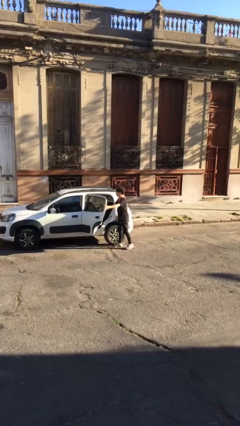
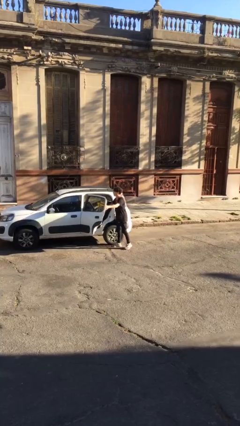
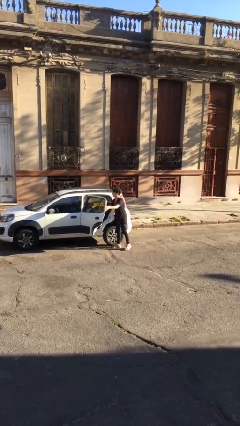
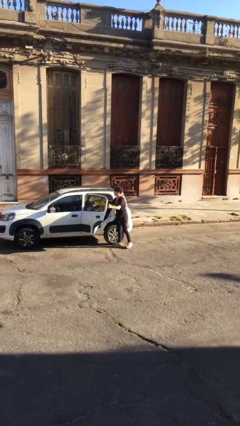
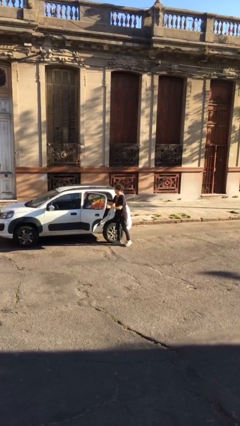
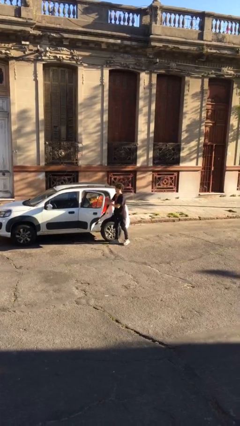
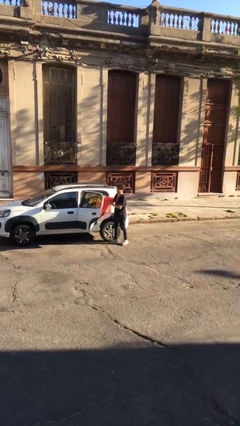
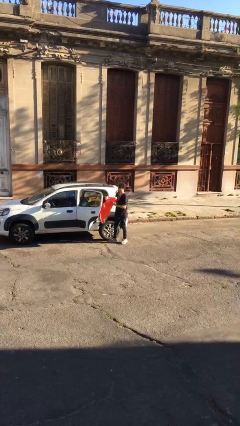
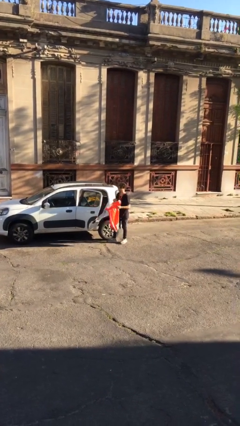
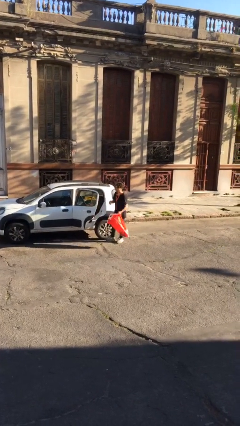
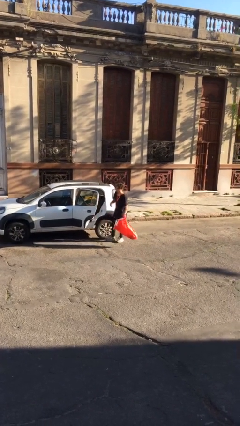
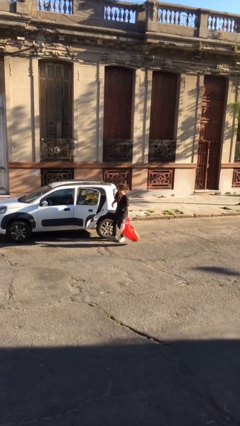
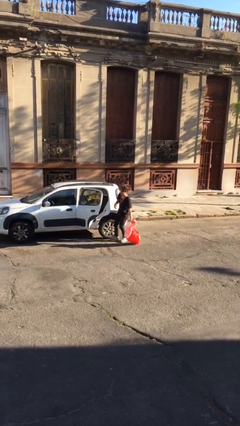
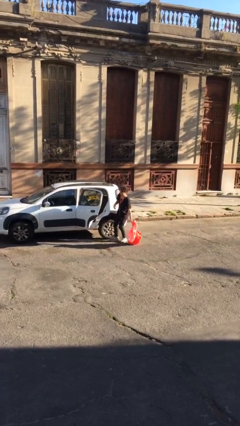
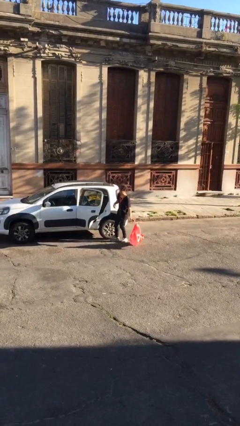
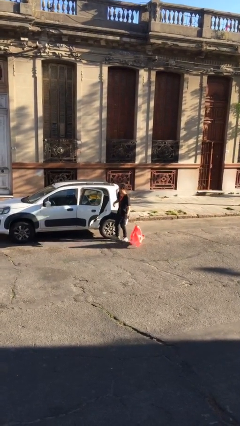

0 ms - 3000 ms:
person unloads car

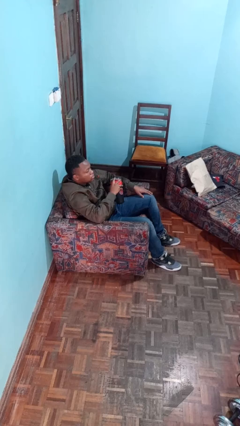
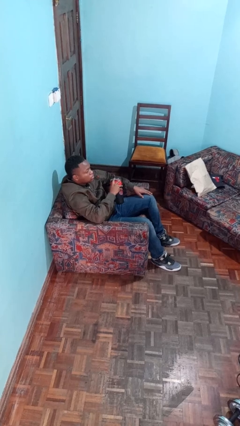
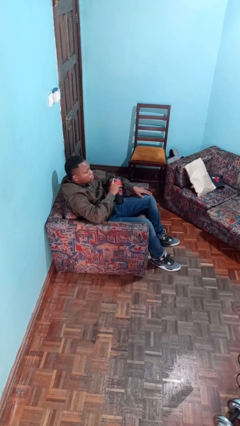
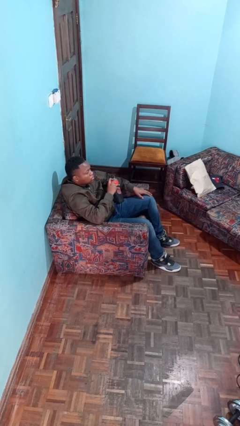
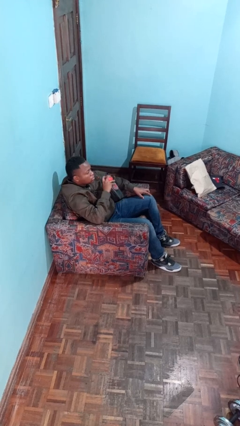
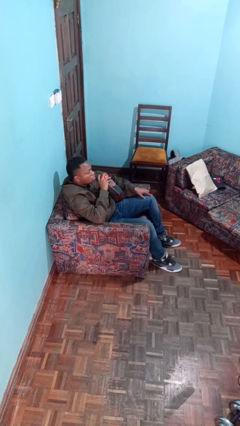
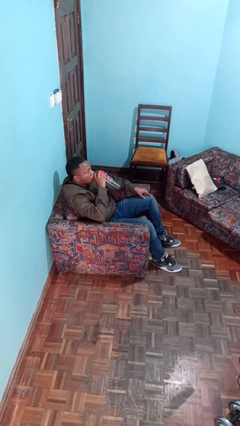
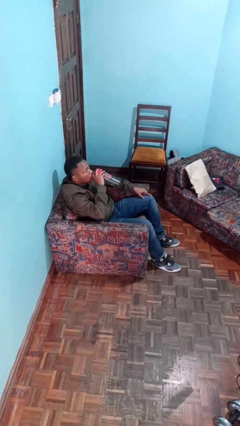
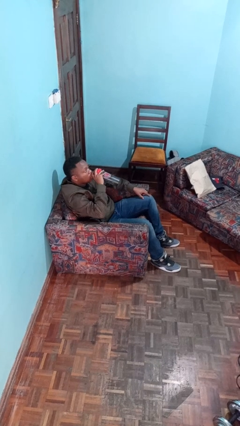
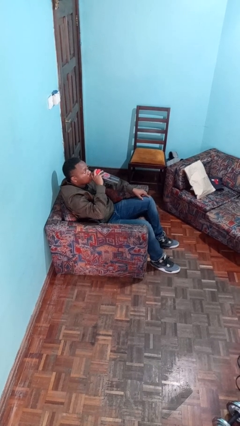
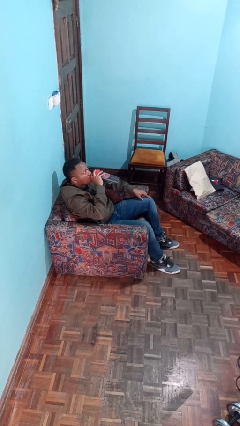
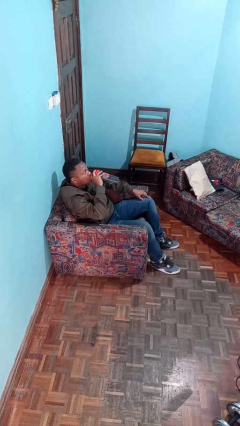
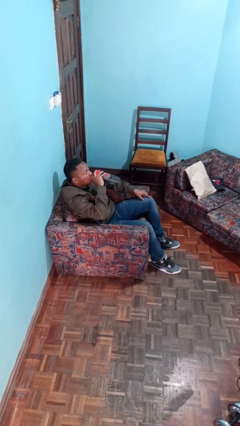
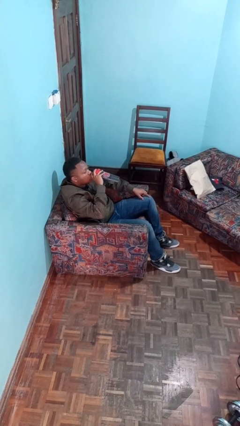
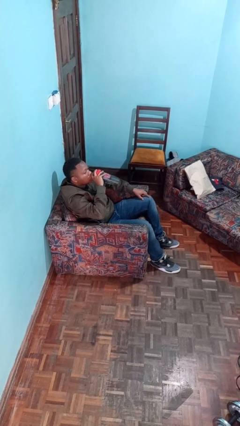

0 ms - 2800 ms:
person drinks from bottle

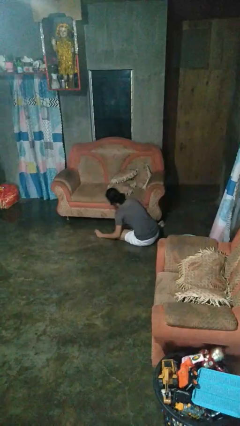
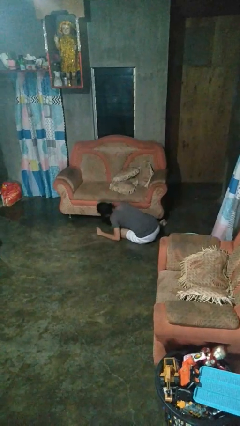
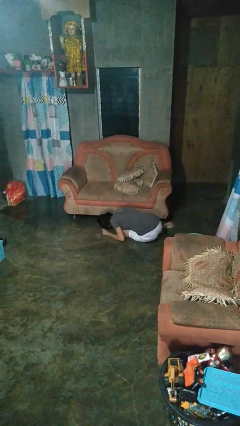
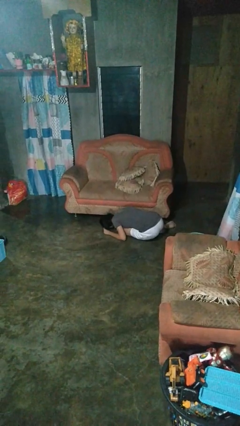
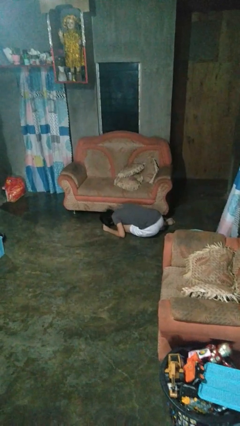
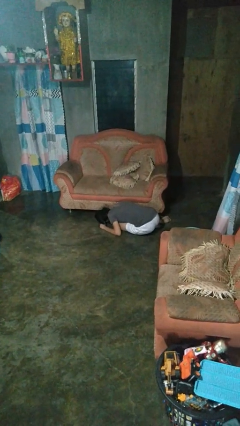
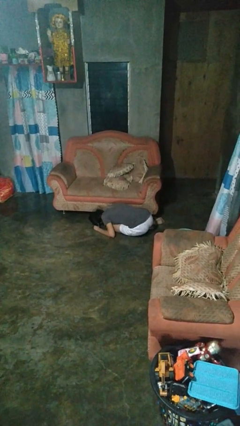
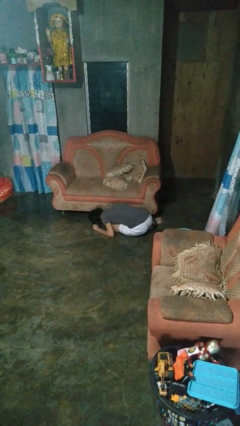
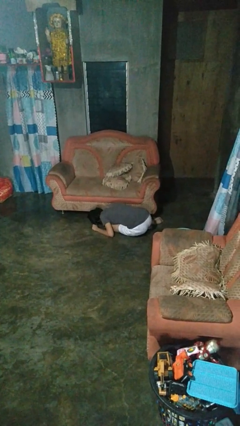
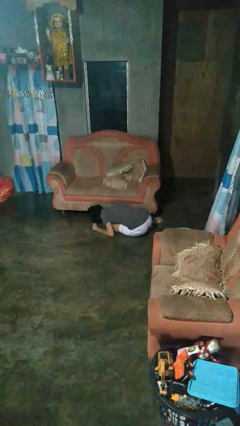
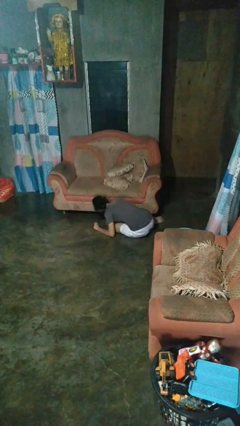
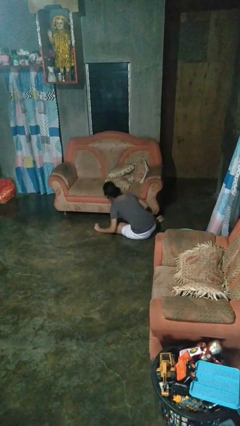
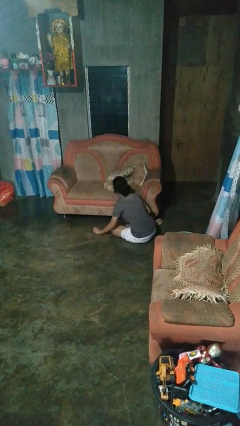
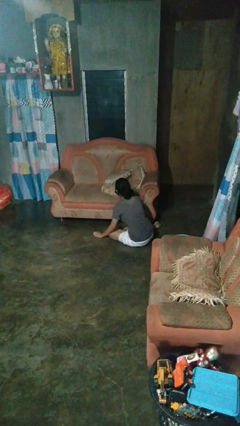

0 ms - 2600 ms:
person searches under couch

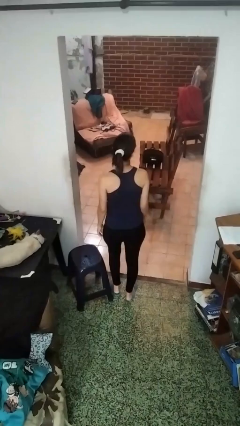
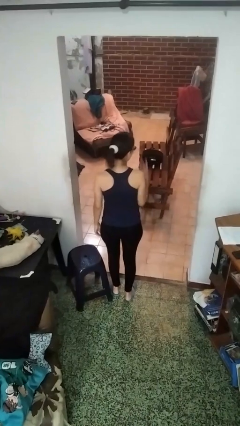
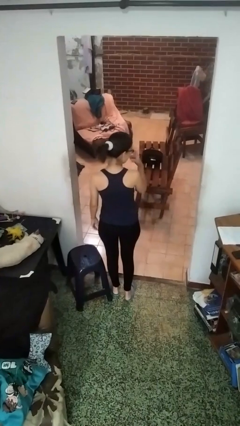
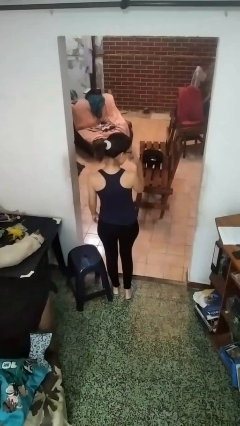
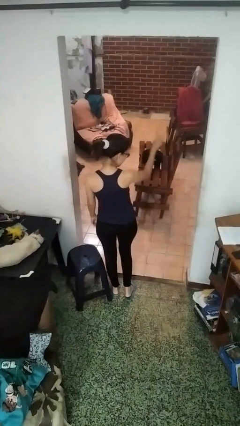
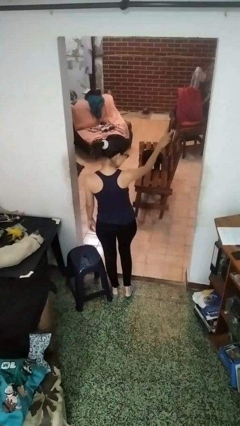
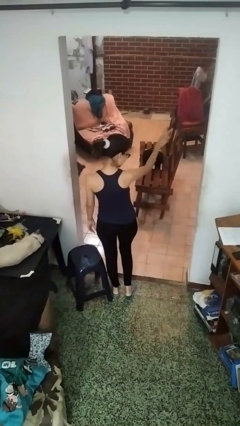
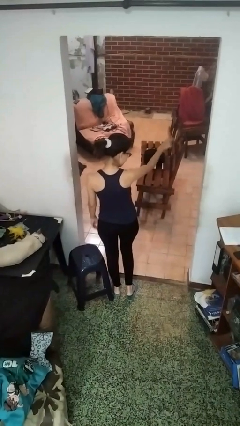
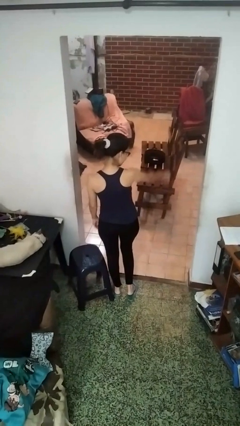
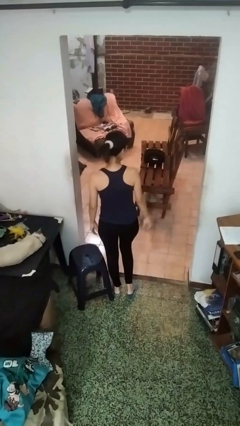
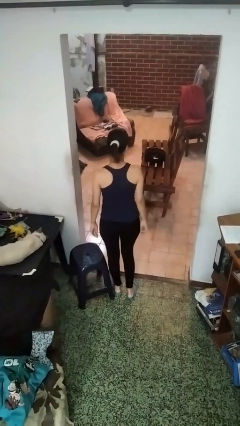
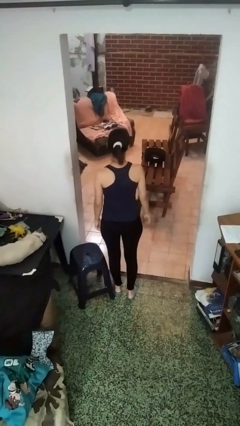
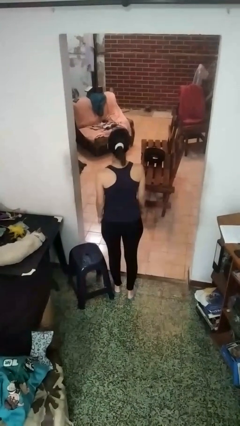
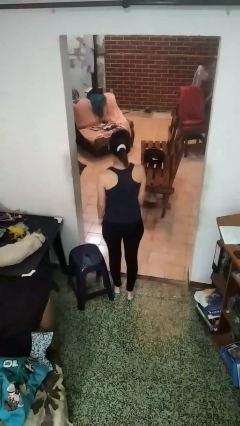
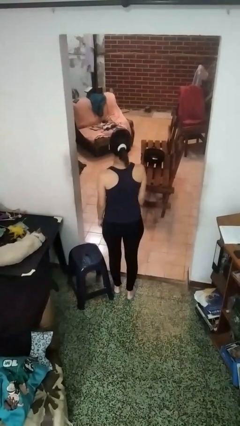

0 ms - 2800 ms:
person gestures watch closely

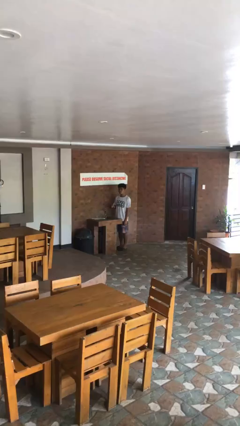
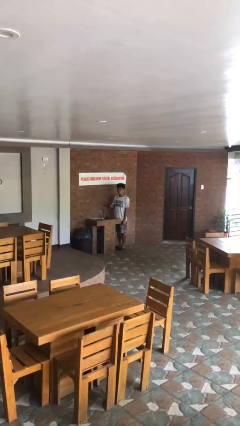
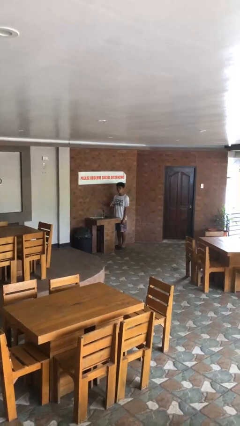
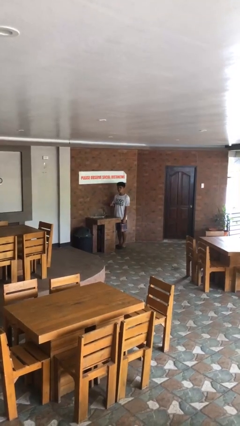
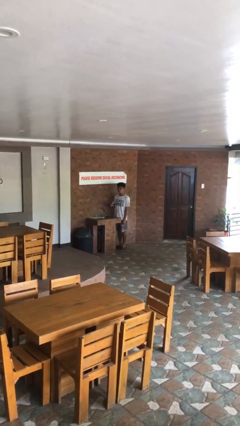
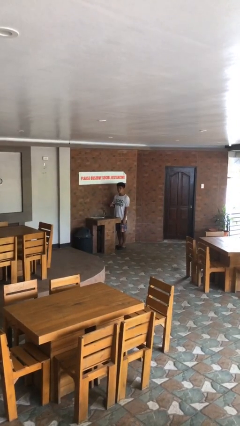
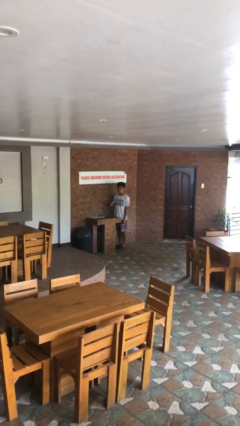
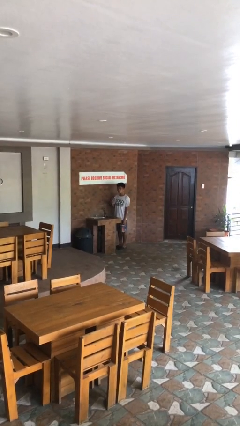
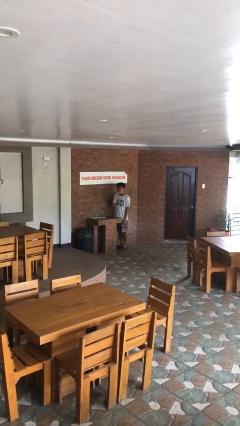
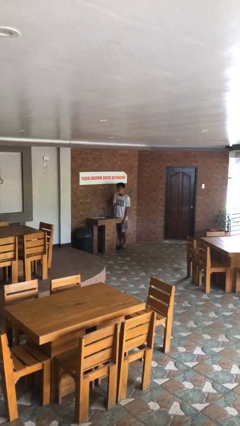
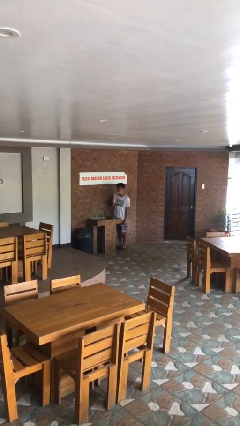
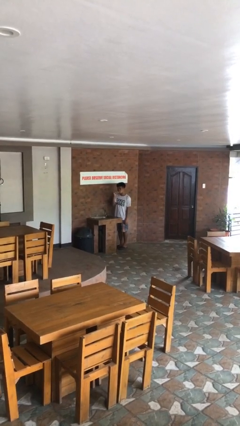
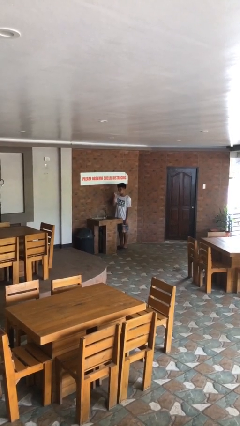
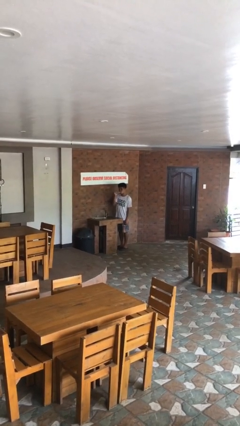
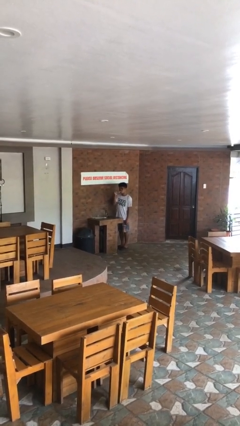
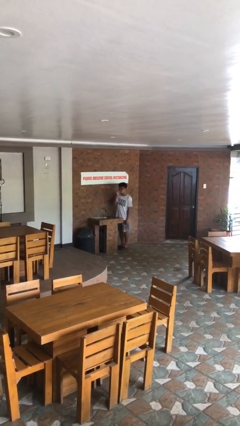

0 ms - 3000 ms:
person brushes teeth

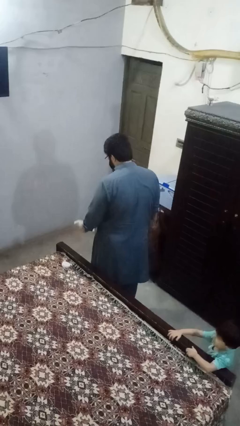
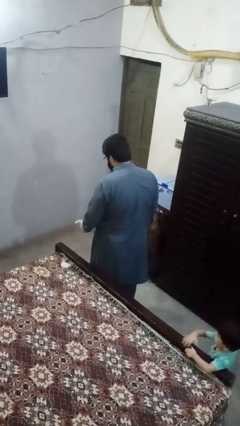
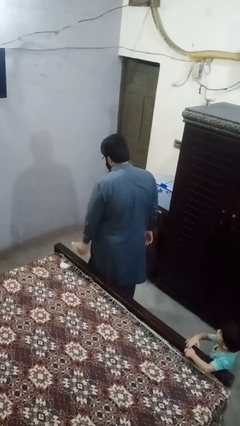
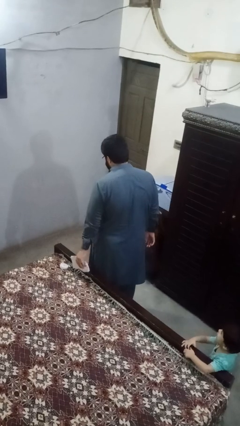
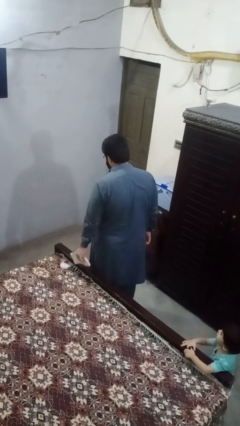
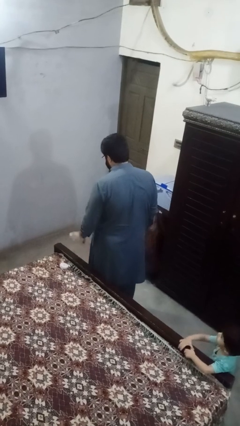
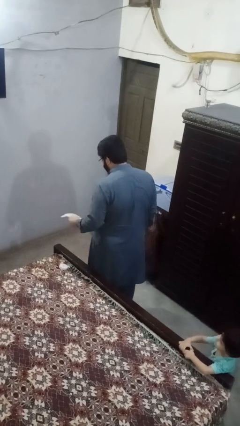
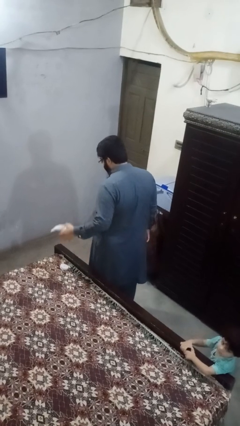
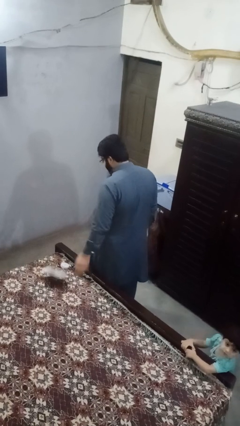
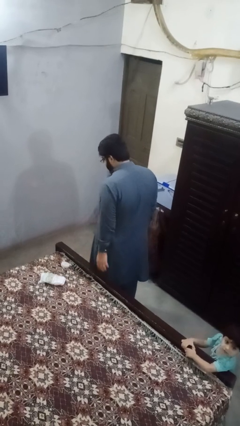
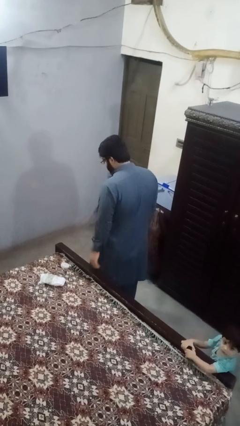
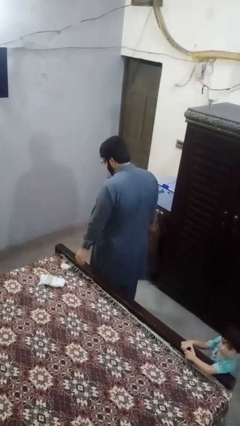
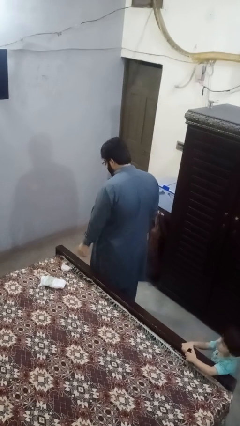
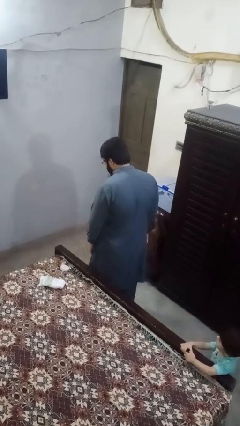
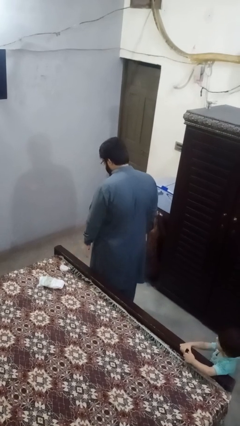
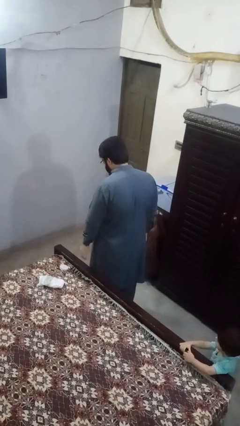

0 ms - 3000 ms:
person throws object on bed
